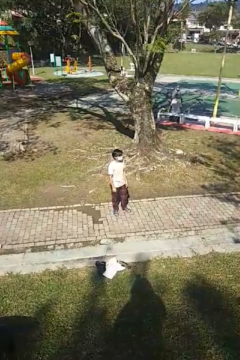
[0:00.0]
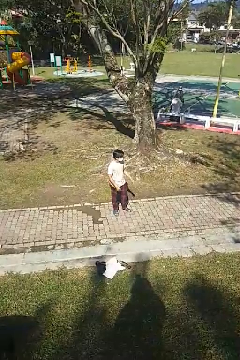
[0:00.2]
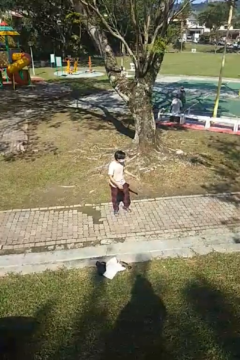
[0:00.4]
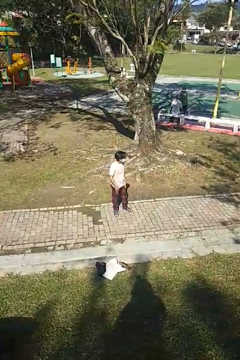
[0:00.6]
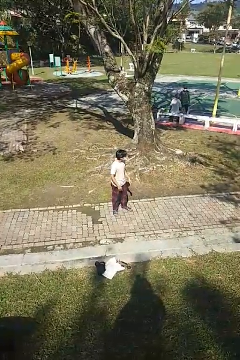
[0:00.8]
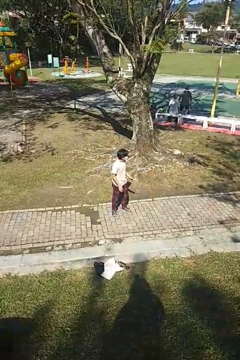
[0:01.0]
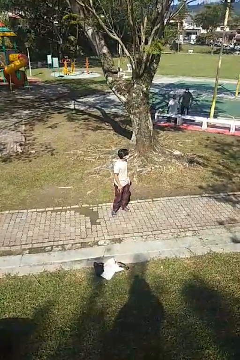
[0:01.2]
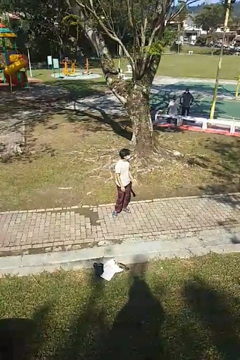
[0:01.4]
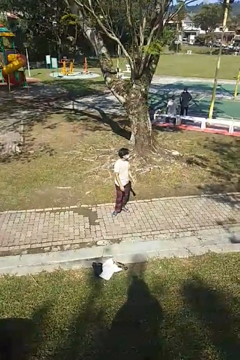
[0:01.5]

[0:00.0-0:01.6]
person slaps hands on thighs

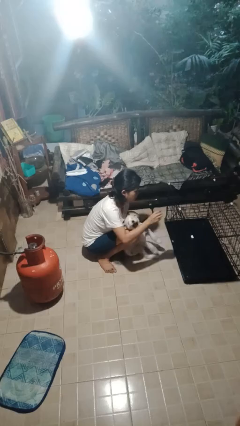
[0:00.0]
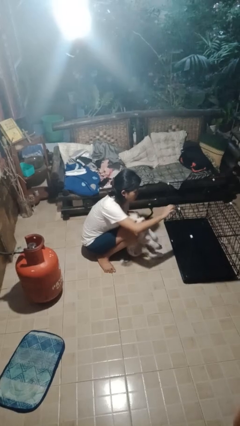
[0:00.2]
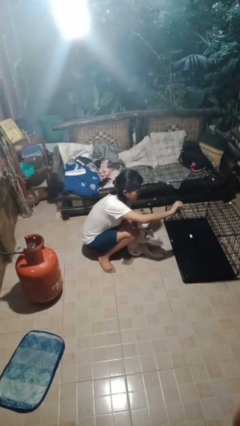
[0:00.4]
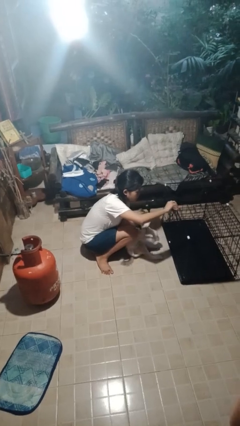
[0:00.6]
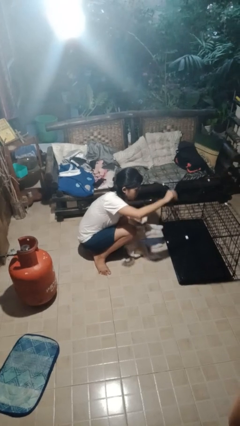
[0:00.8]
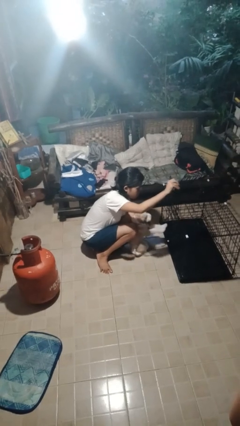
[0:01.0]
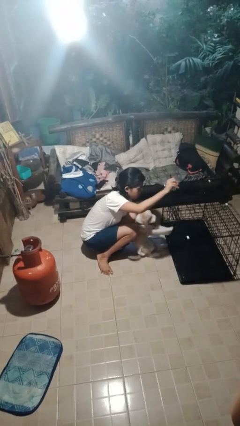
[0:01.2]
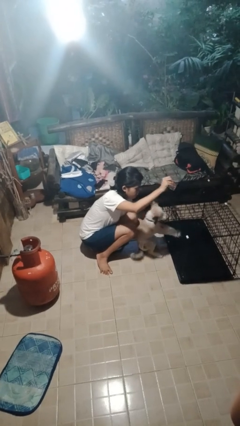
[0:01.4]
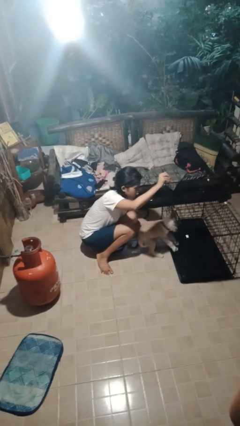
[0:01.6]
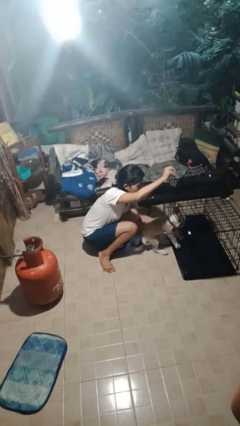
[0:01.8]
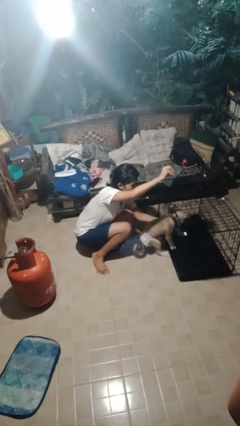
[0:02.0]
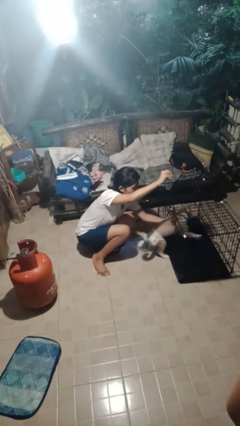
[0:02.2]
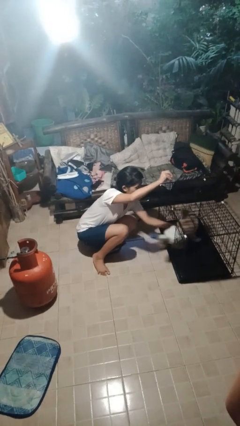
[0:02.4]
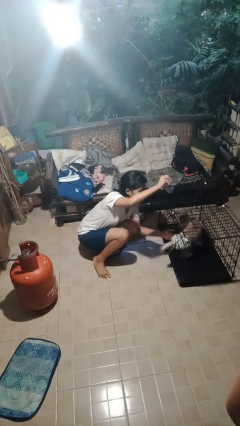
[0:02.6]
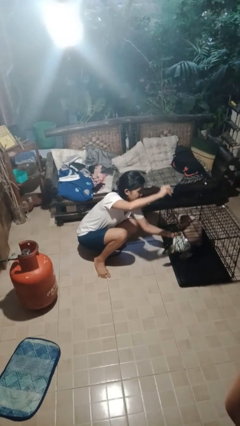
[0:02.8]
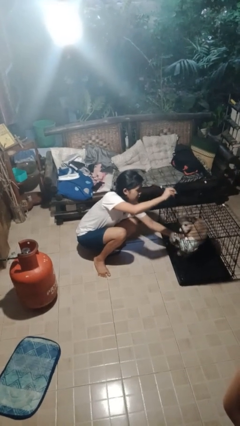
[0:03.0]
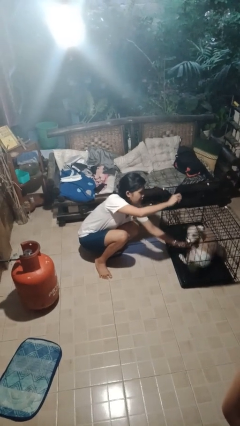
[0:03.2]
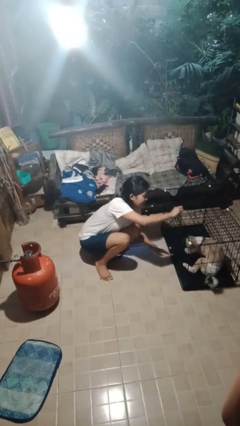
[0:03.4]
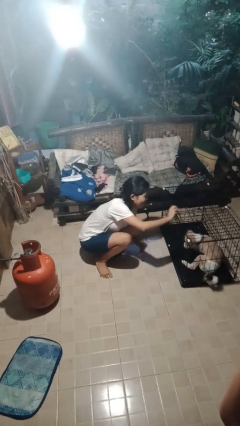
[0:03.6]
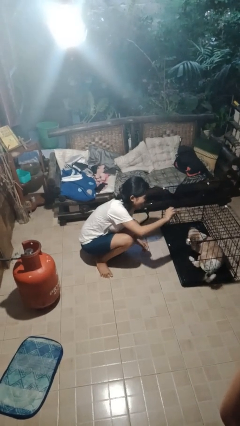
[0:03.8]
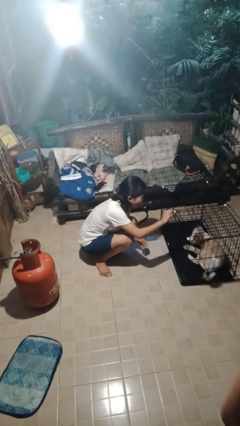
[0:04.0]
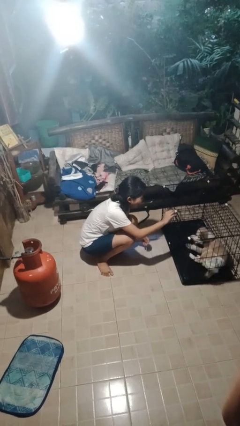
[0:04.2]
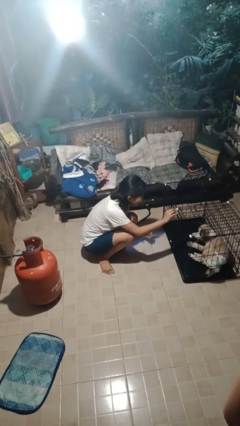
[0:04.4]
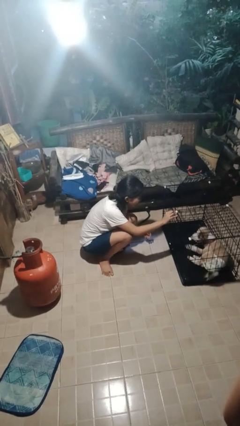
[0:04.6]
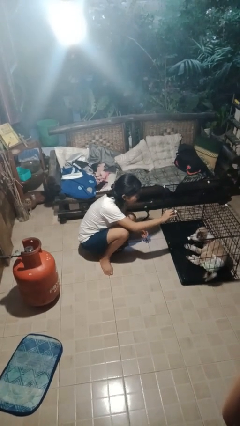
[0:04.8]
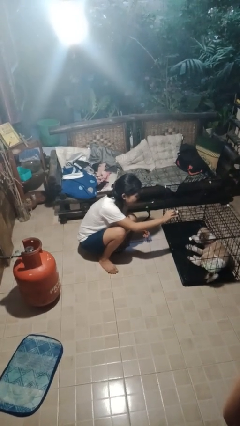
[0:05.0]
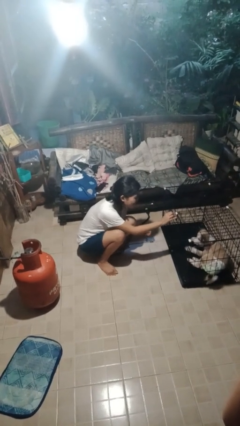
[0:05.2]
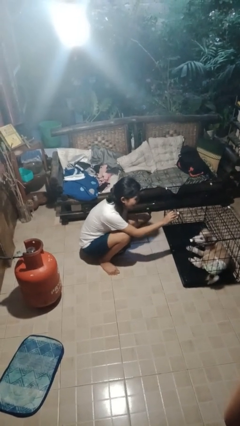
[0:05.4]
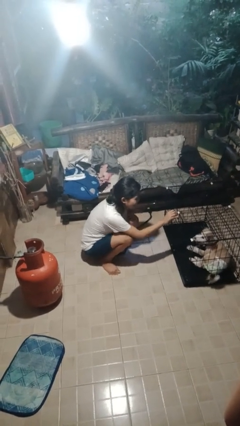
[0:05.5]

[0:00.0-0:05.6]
person crates dog
